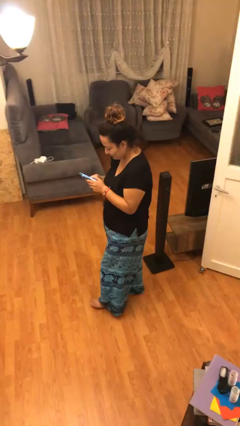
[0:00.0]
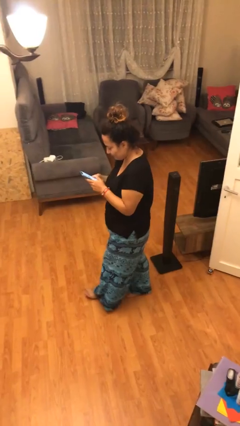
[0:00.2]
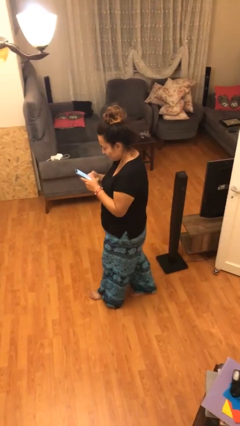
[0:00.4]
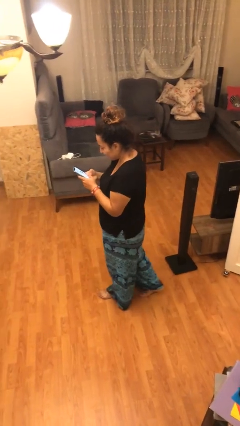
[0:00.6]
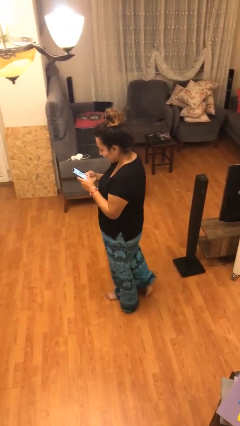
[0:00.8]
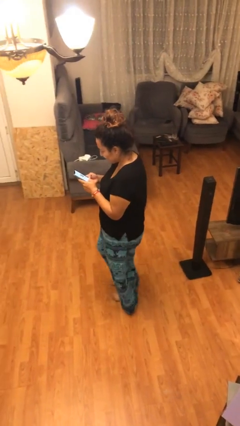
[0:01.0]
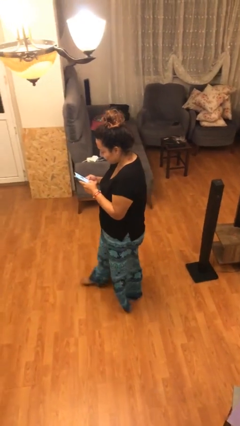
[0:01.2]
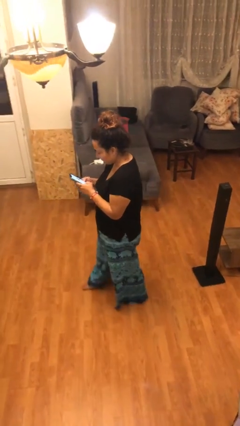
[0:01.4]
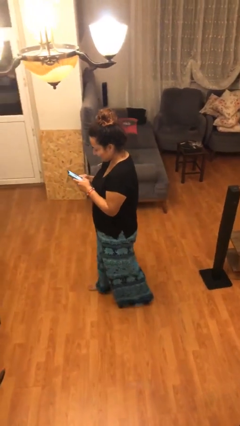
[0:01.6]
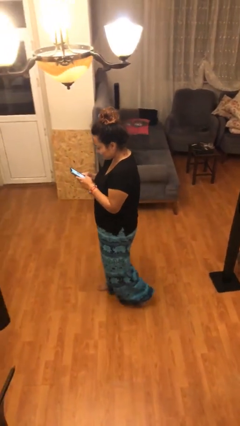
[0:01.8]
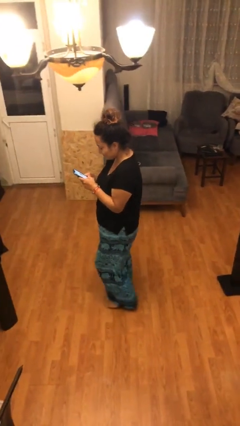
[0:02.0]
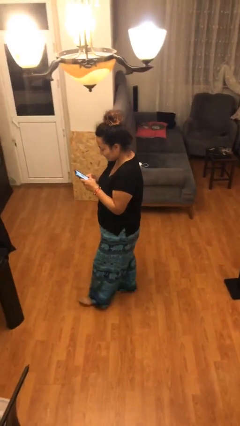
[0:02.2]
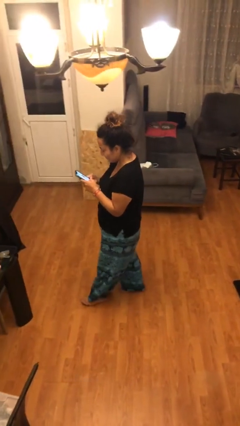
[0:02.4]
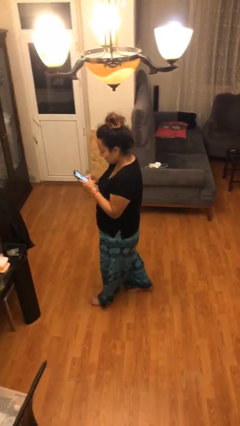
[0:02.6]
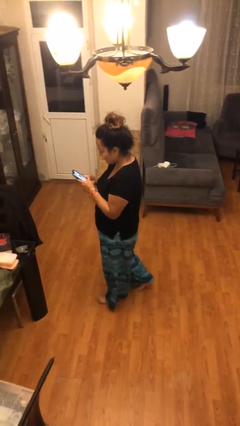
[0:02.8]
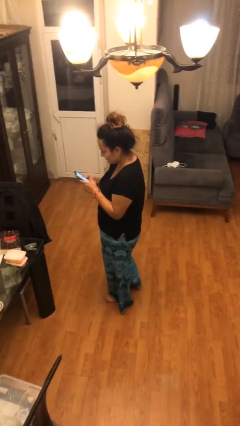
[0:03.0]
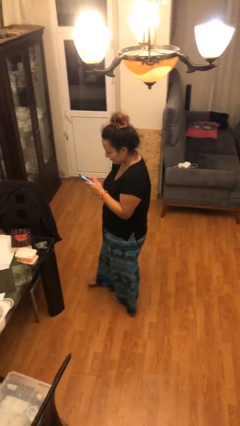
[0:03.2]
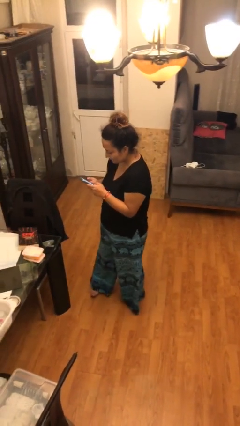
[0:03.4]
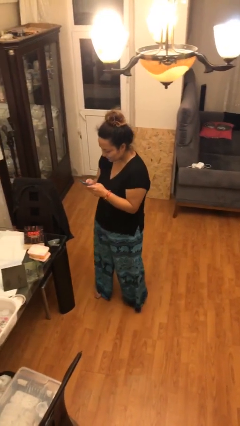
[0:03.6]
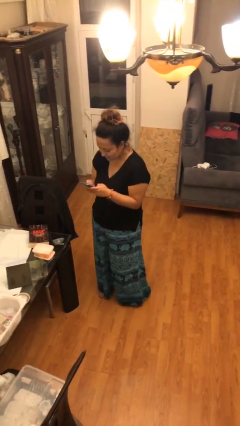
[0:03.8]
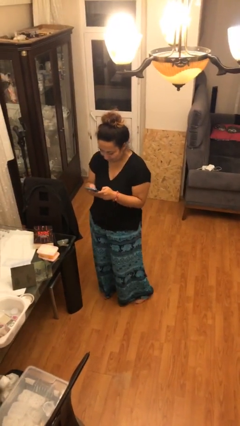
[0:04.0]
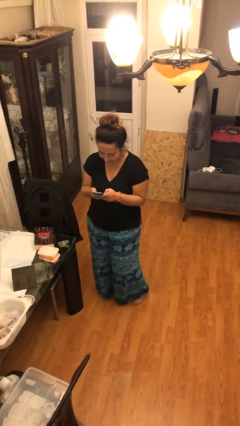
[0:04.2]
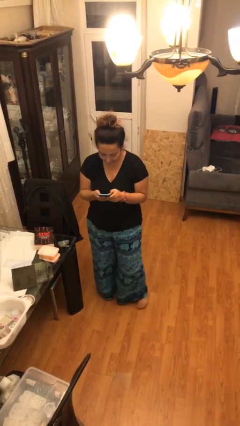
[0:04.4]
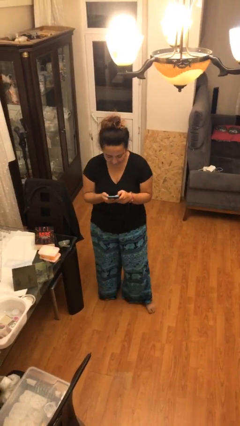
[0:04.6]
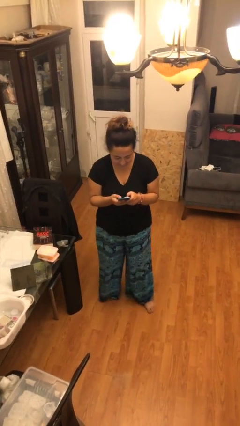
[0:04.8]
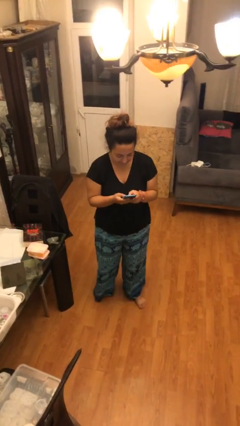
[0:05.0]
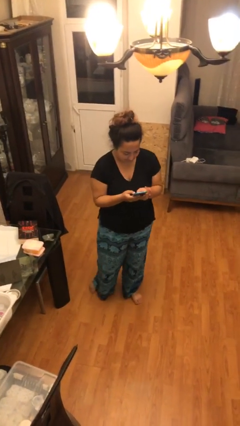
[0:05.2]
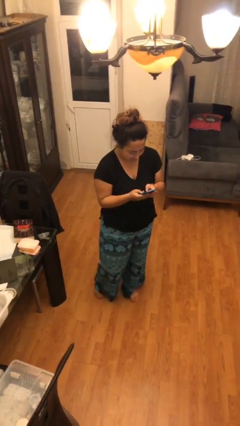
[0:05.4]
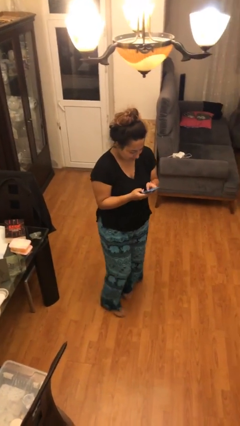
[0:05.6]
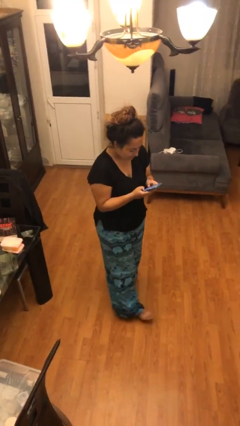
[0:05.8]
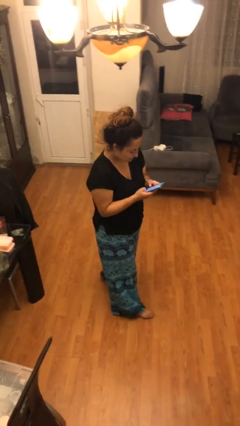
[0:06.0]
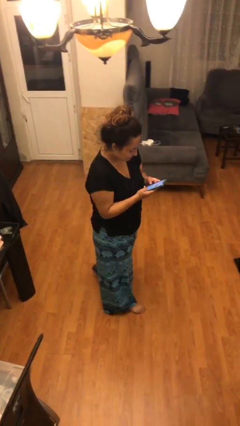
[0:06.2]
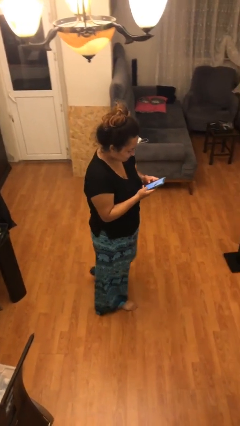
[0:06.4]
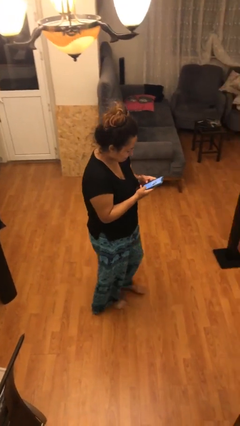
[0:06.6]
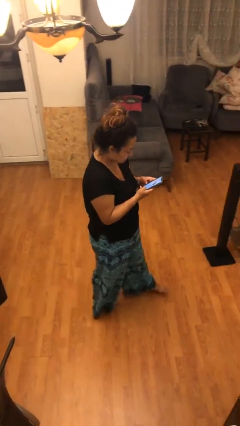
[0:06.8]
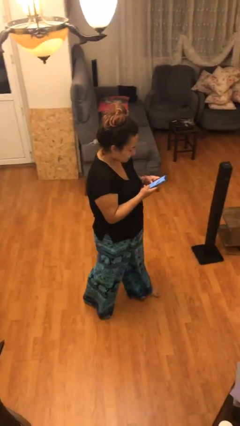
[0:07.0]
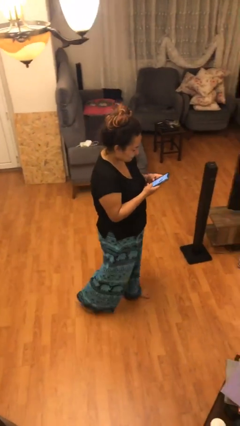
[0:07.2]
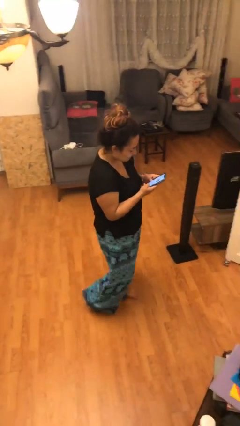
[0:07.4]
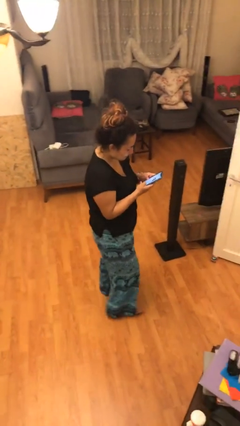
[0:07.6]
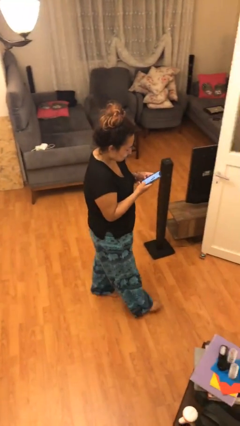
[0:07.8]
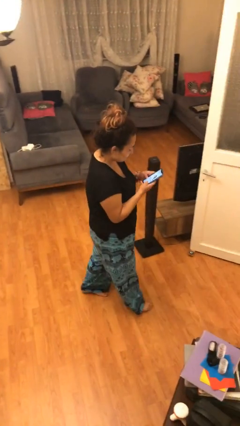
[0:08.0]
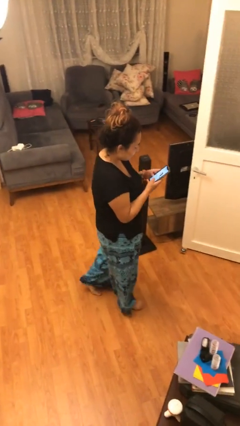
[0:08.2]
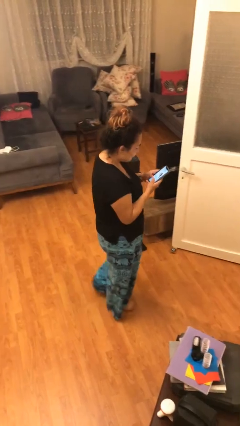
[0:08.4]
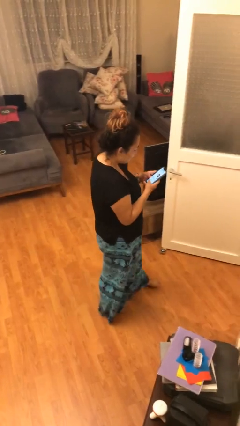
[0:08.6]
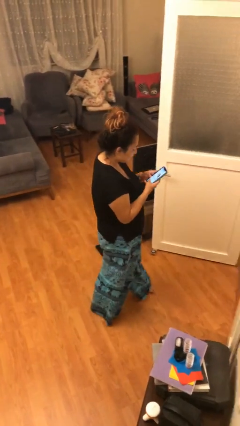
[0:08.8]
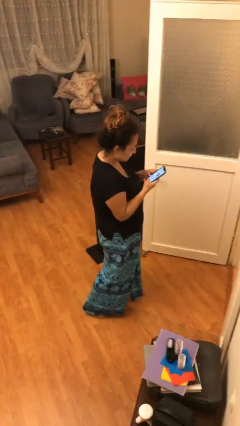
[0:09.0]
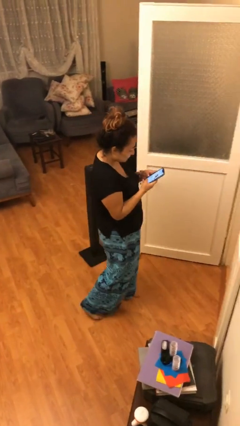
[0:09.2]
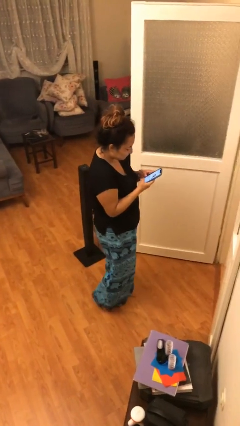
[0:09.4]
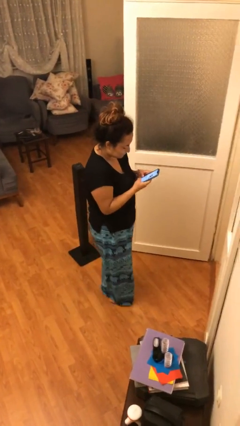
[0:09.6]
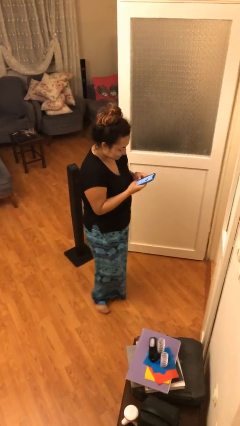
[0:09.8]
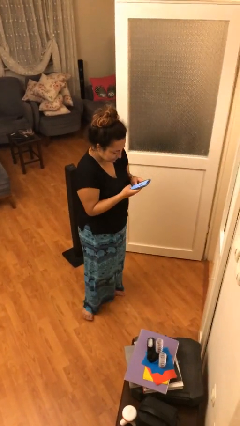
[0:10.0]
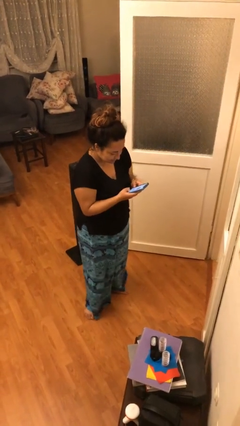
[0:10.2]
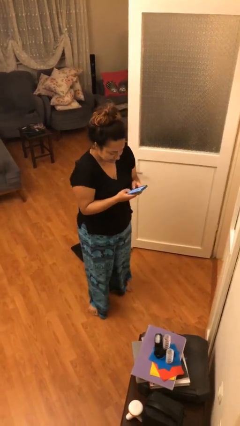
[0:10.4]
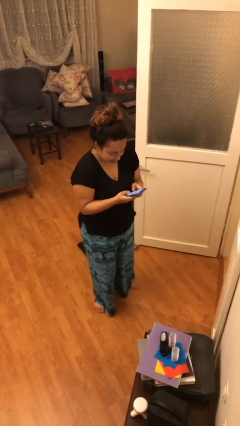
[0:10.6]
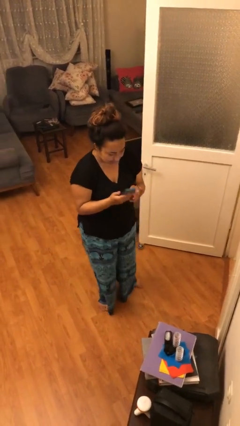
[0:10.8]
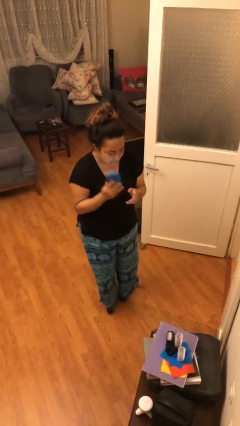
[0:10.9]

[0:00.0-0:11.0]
person texts on phone

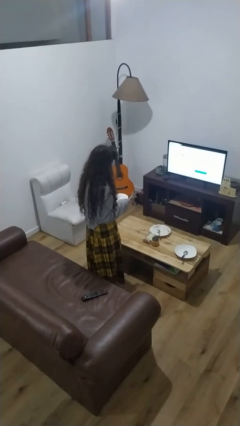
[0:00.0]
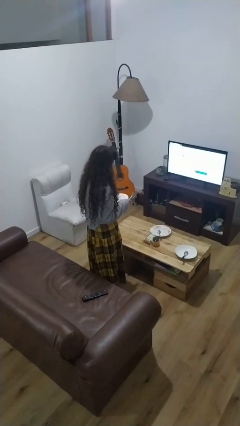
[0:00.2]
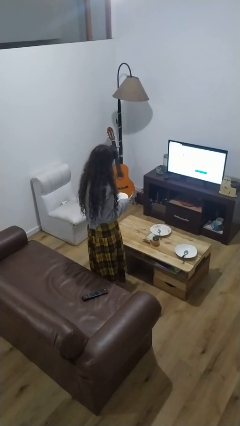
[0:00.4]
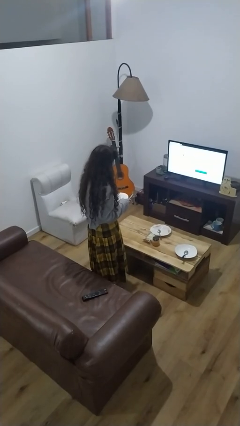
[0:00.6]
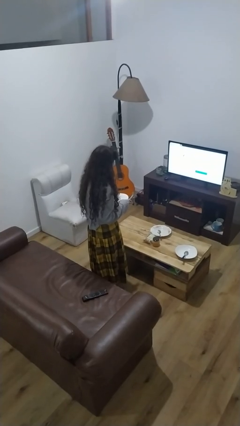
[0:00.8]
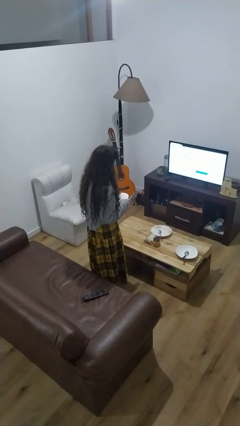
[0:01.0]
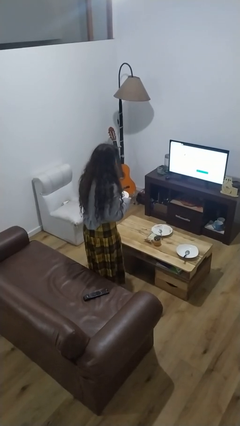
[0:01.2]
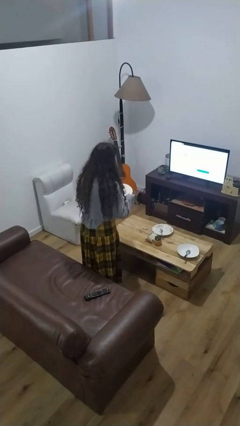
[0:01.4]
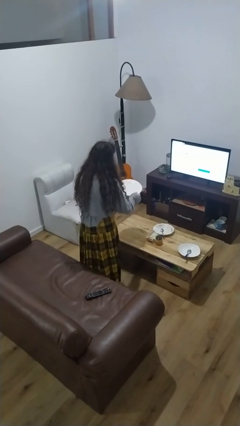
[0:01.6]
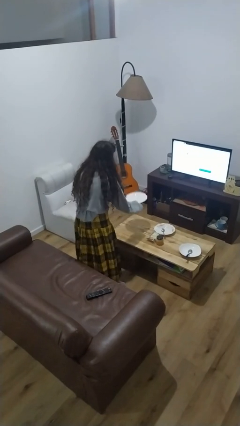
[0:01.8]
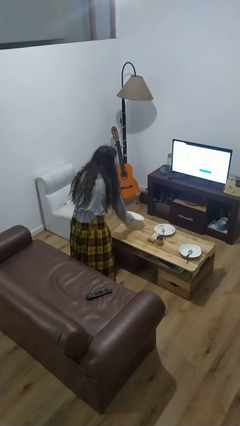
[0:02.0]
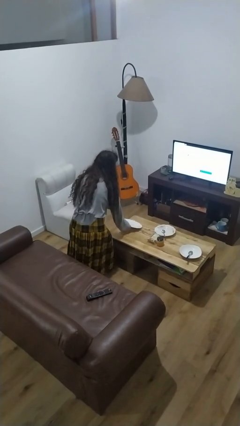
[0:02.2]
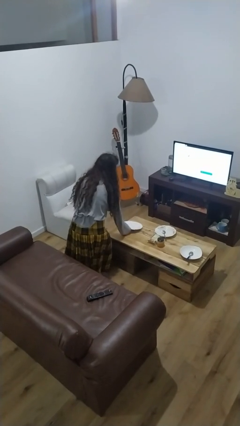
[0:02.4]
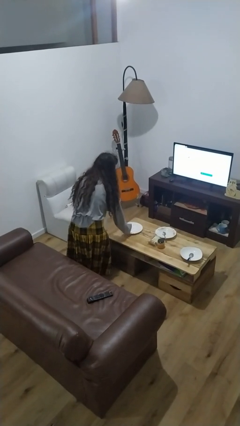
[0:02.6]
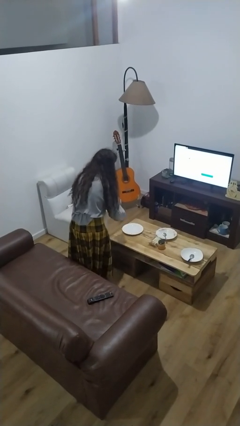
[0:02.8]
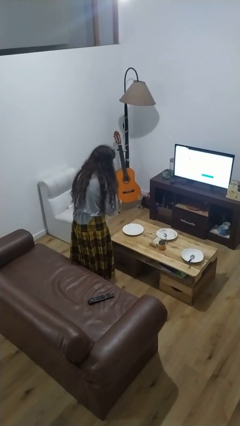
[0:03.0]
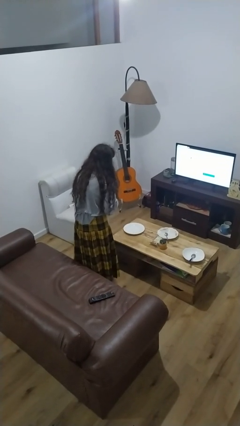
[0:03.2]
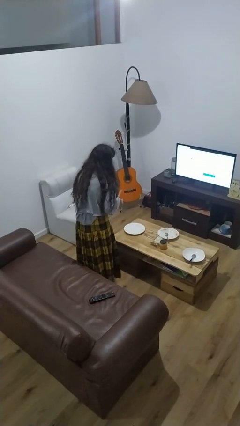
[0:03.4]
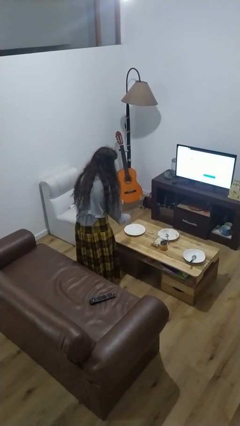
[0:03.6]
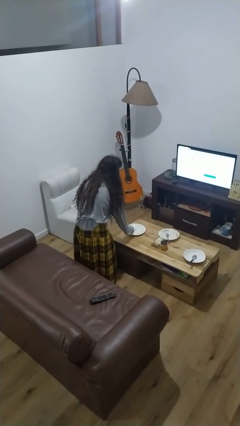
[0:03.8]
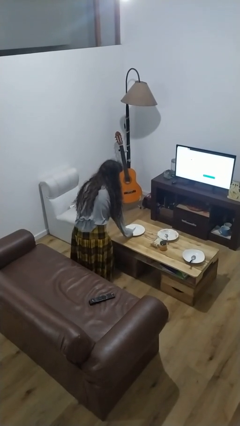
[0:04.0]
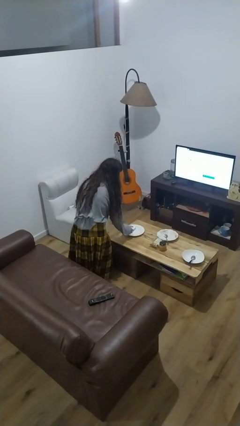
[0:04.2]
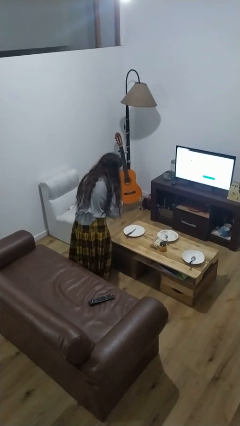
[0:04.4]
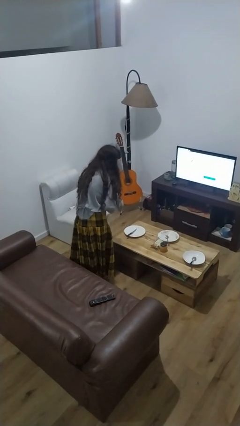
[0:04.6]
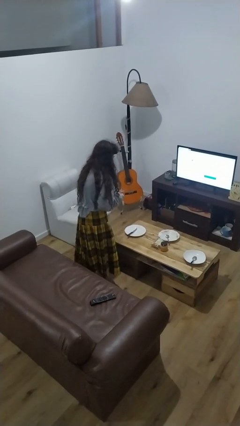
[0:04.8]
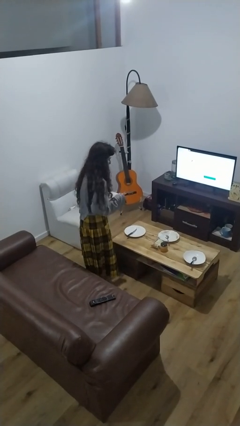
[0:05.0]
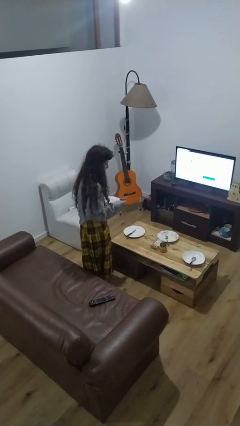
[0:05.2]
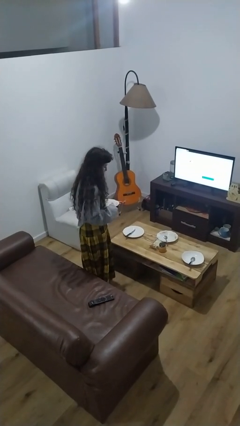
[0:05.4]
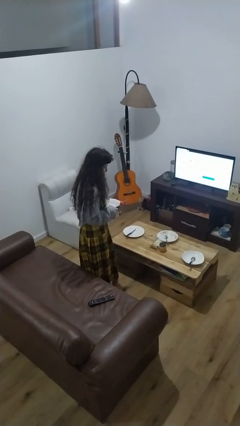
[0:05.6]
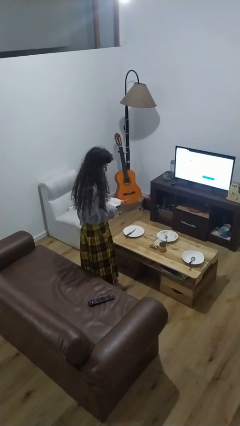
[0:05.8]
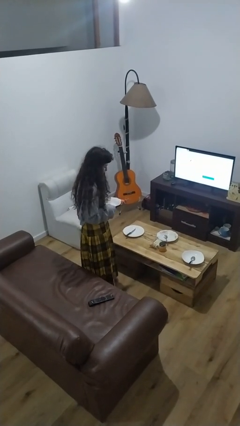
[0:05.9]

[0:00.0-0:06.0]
person sets table

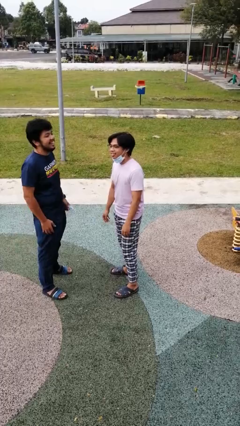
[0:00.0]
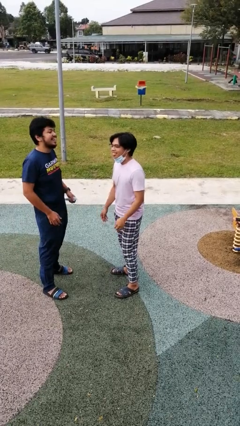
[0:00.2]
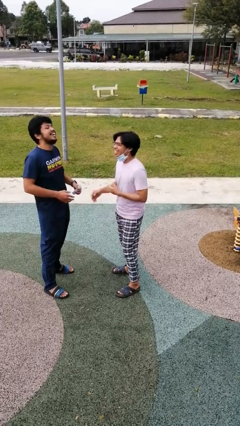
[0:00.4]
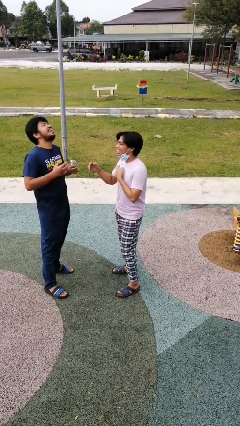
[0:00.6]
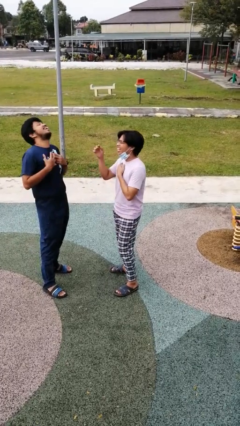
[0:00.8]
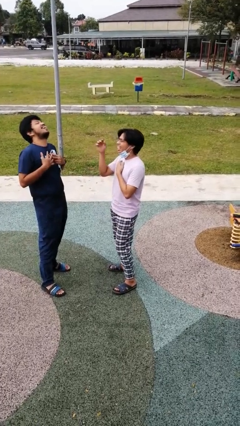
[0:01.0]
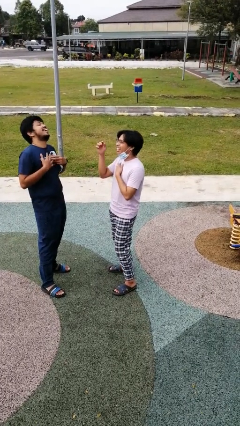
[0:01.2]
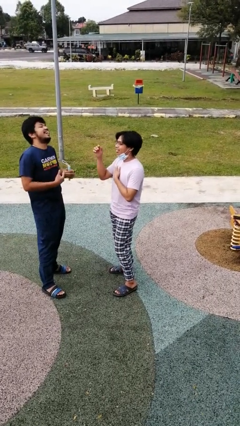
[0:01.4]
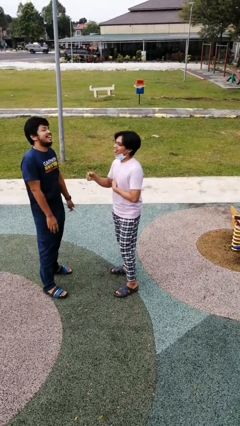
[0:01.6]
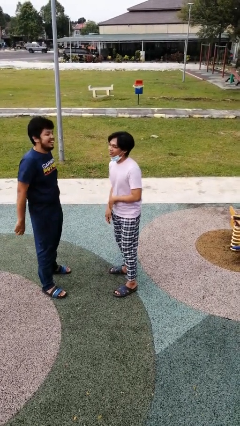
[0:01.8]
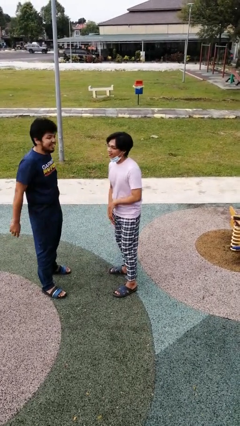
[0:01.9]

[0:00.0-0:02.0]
person laughs with person
